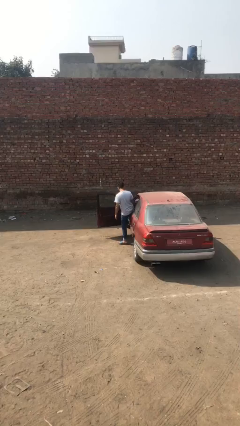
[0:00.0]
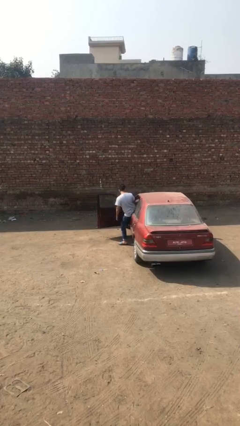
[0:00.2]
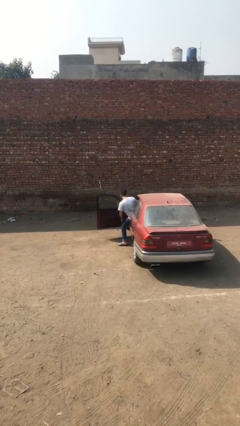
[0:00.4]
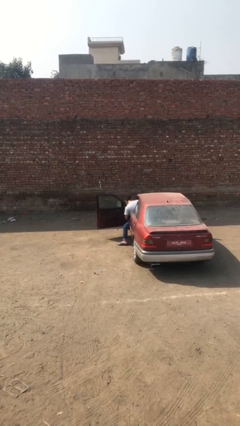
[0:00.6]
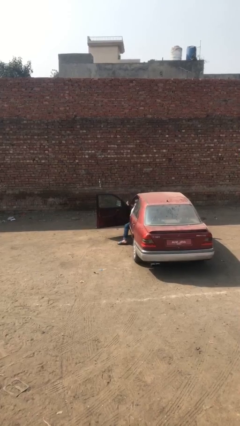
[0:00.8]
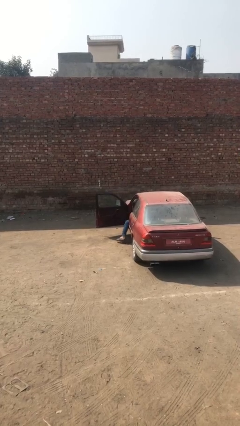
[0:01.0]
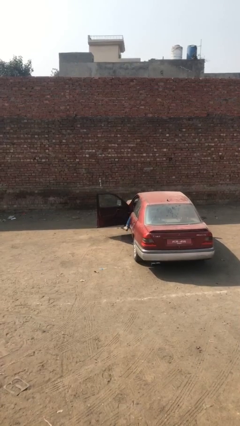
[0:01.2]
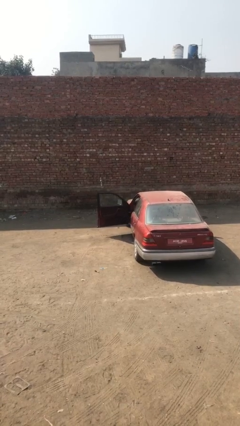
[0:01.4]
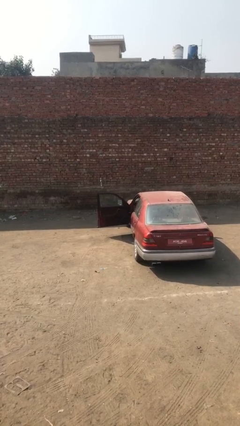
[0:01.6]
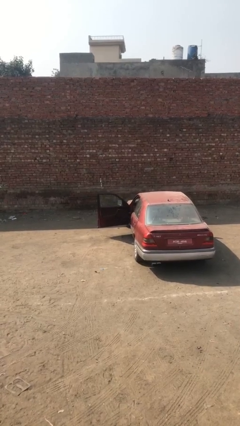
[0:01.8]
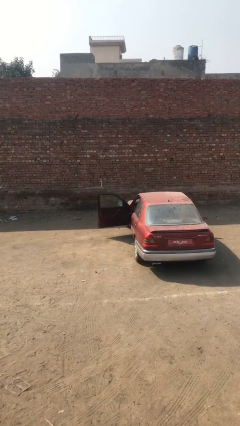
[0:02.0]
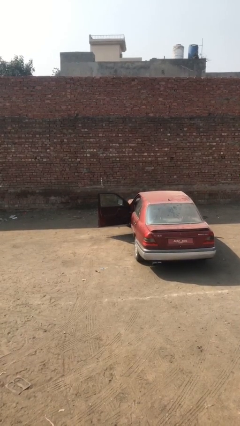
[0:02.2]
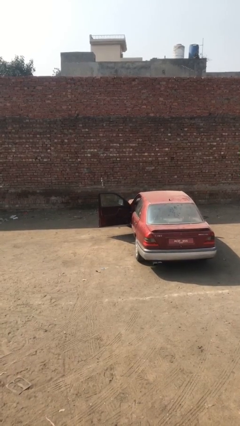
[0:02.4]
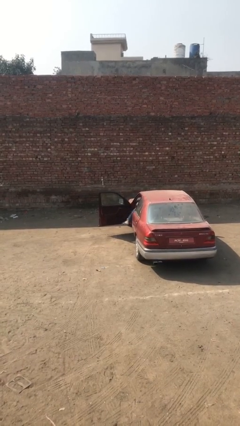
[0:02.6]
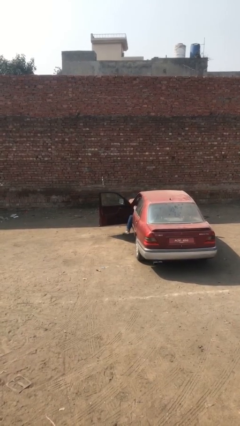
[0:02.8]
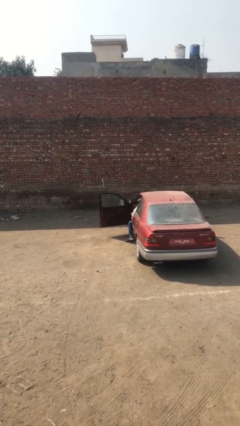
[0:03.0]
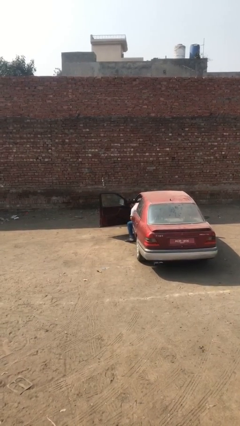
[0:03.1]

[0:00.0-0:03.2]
person enters car

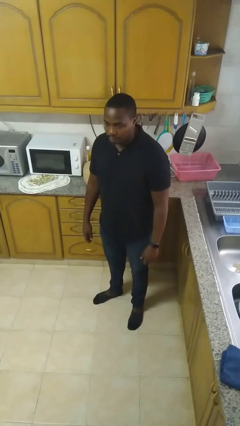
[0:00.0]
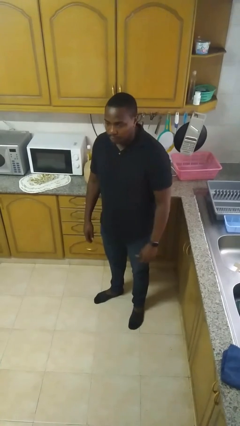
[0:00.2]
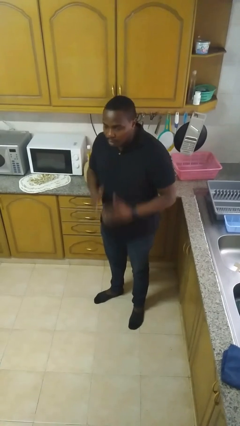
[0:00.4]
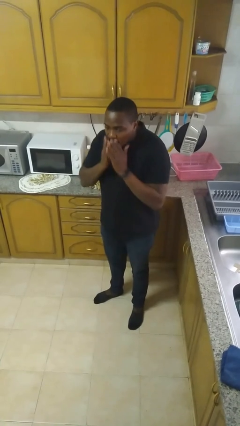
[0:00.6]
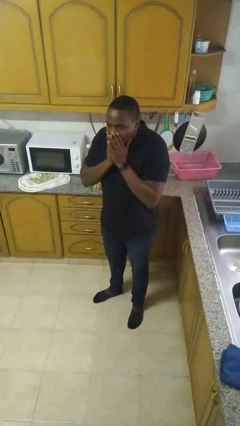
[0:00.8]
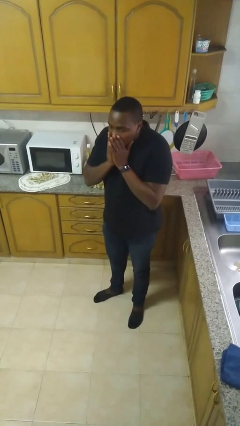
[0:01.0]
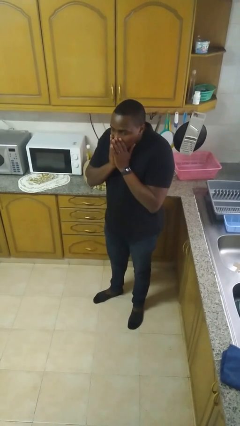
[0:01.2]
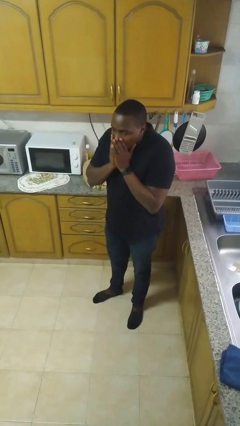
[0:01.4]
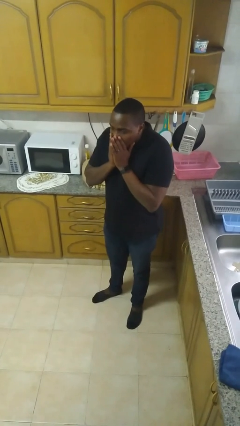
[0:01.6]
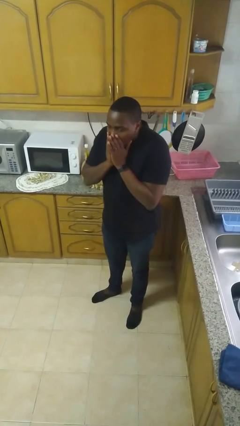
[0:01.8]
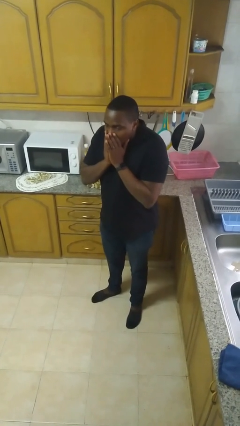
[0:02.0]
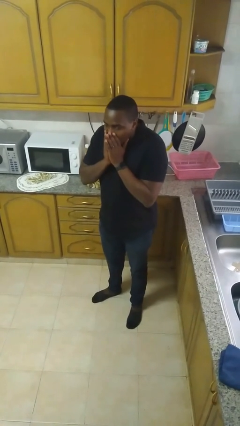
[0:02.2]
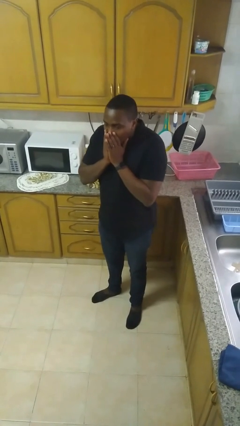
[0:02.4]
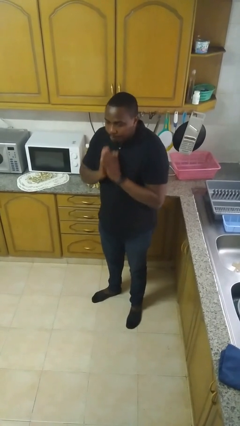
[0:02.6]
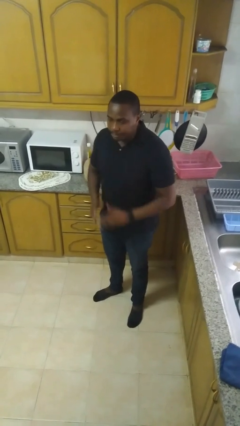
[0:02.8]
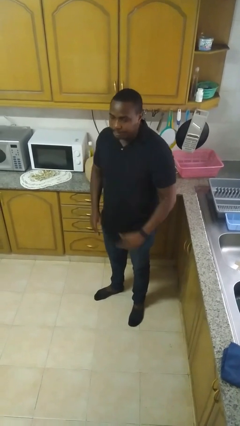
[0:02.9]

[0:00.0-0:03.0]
person yawns

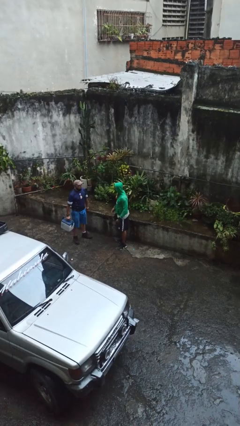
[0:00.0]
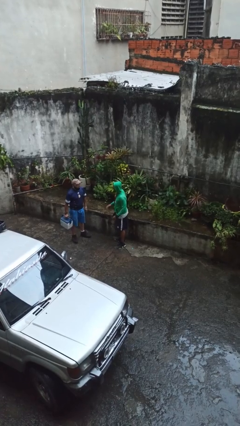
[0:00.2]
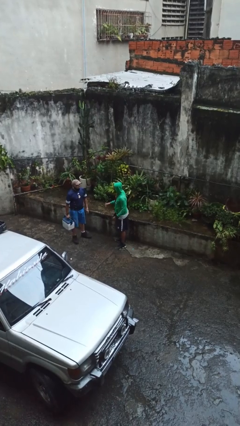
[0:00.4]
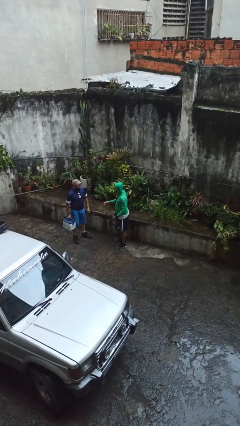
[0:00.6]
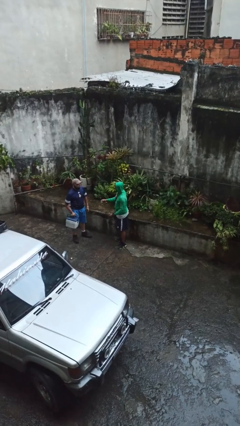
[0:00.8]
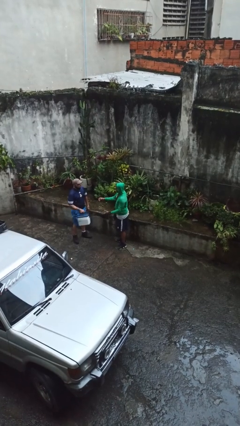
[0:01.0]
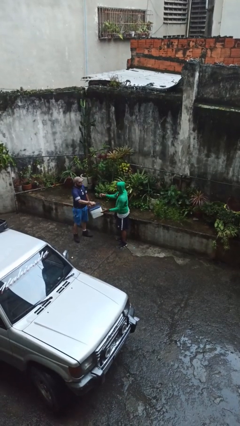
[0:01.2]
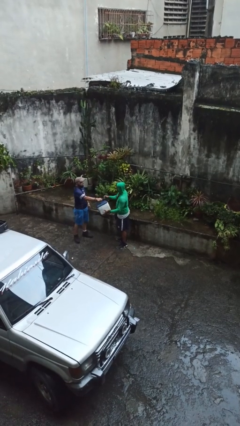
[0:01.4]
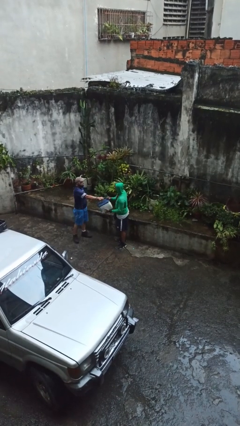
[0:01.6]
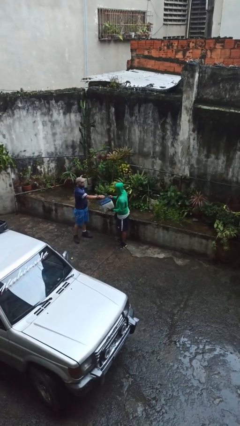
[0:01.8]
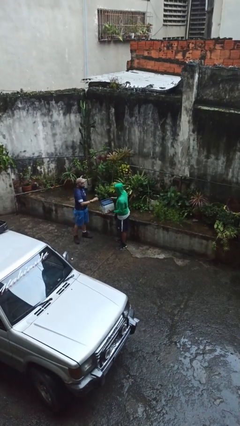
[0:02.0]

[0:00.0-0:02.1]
person transfers object to person

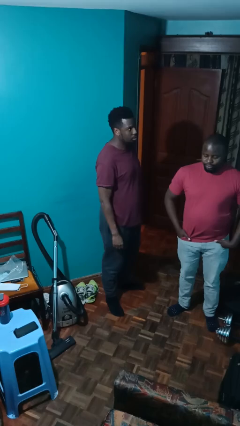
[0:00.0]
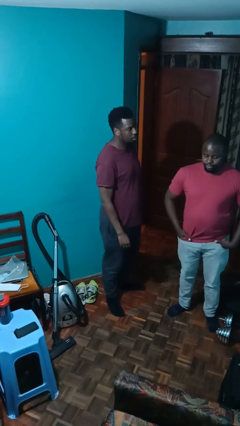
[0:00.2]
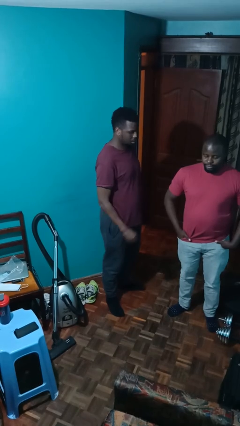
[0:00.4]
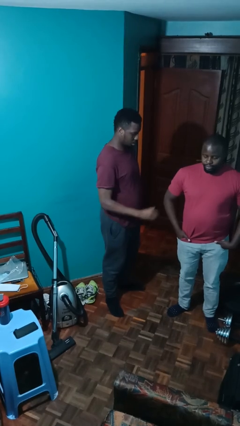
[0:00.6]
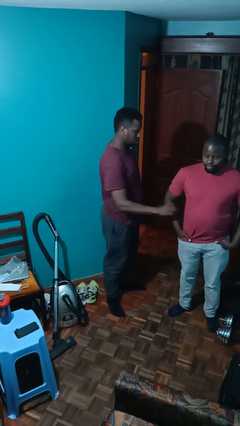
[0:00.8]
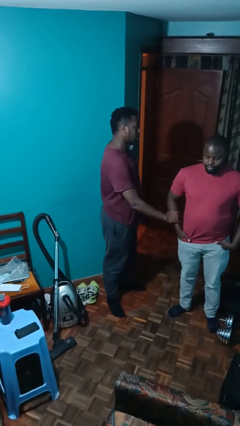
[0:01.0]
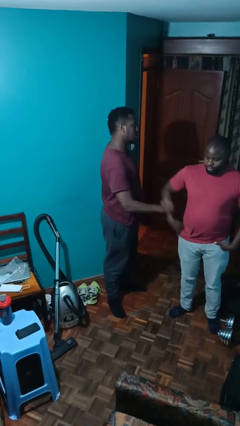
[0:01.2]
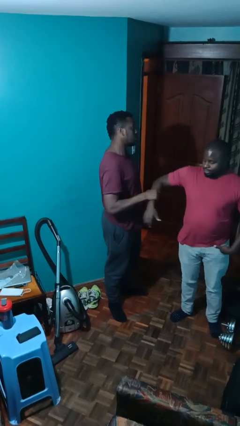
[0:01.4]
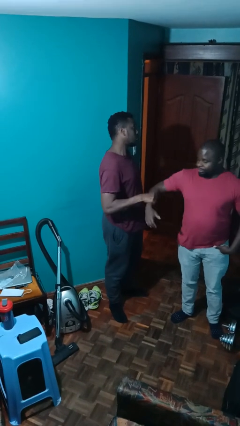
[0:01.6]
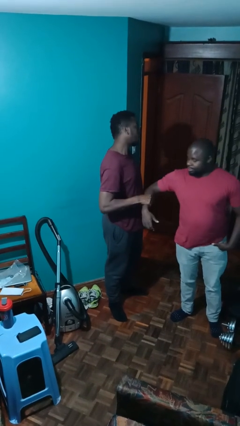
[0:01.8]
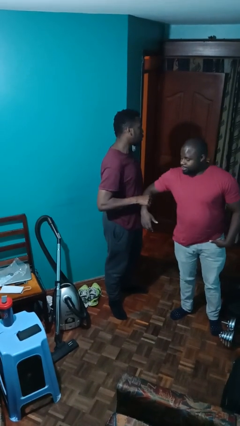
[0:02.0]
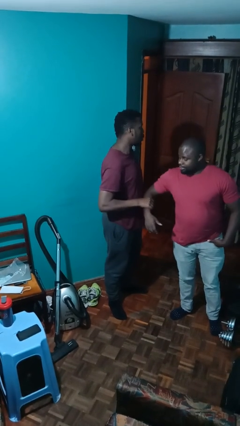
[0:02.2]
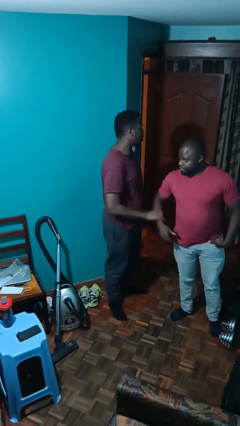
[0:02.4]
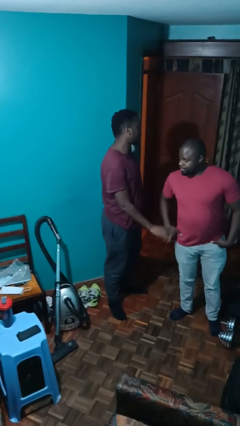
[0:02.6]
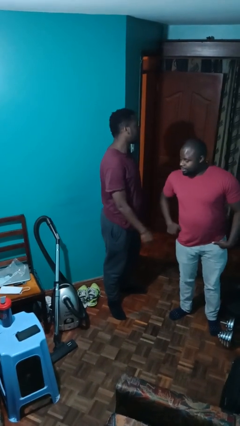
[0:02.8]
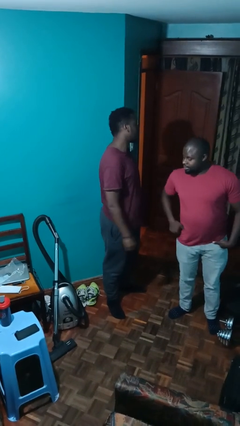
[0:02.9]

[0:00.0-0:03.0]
person grabs person by forearm

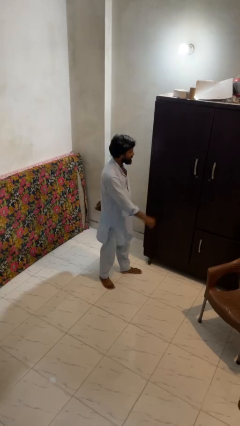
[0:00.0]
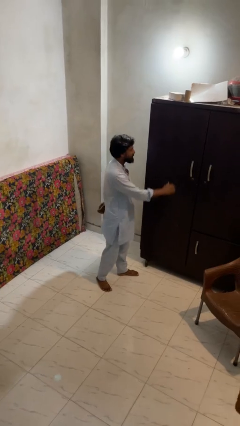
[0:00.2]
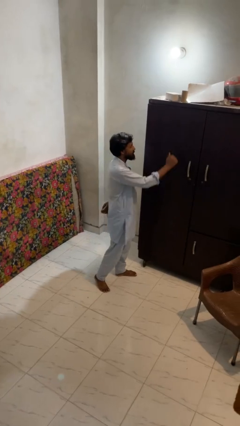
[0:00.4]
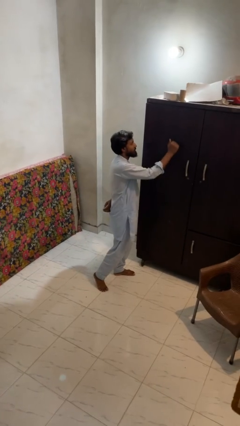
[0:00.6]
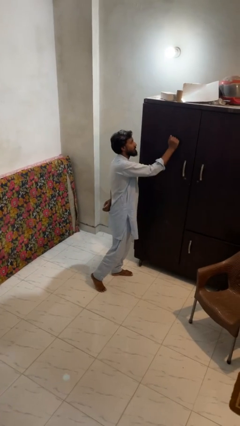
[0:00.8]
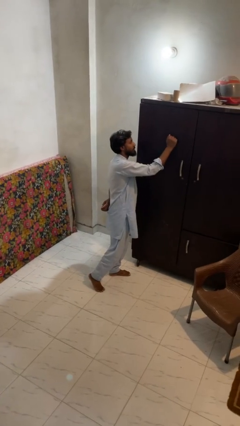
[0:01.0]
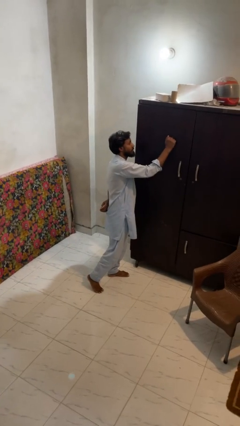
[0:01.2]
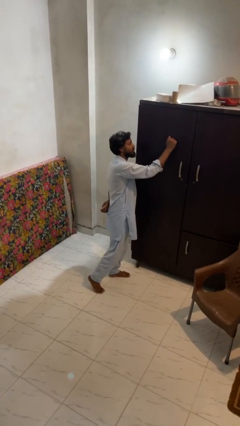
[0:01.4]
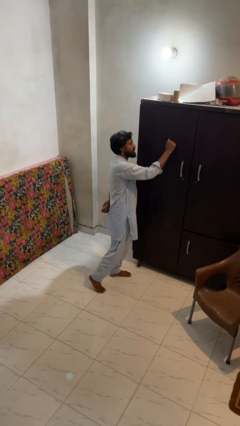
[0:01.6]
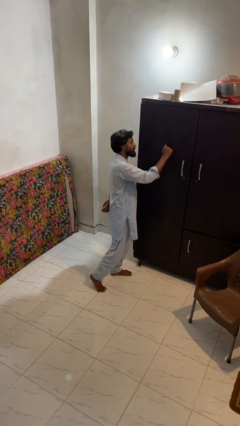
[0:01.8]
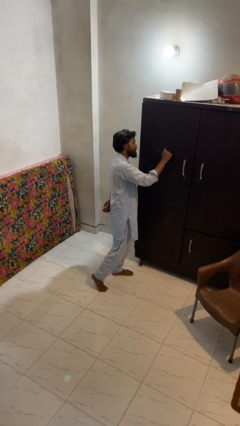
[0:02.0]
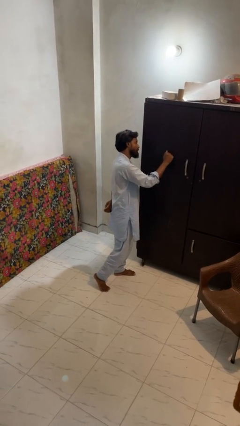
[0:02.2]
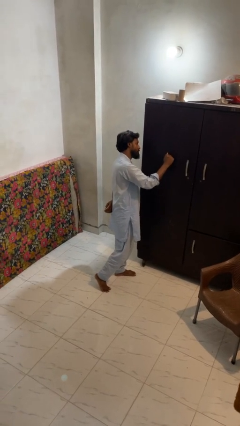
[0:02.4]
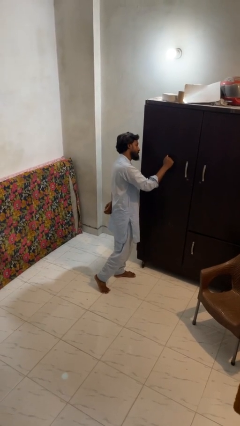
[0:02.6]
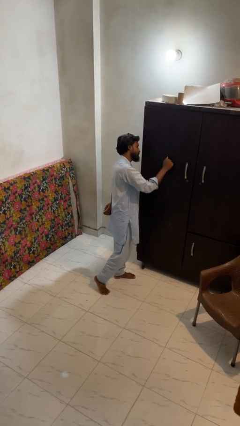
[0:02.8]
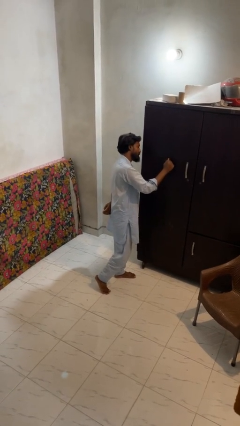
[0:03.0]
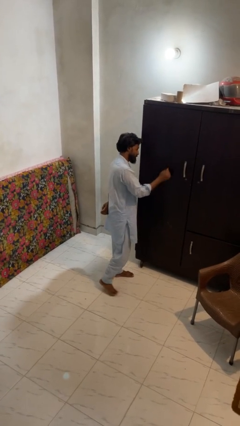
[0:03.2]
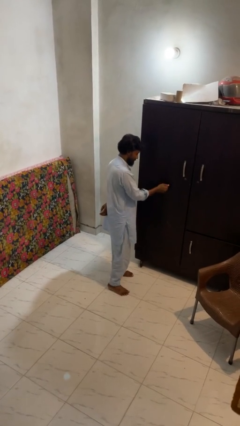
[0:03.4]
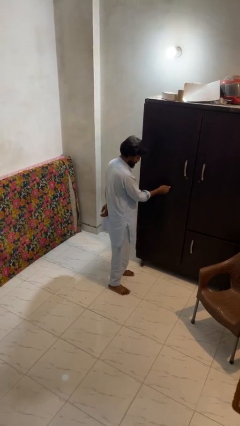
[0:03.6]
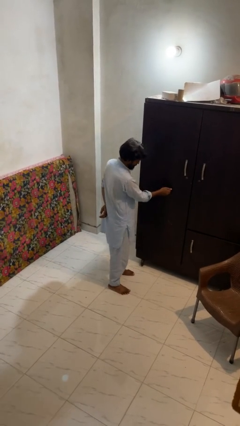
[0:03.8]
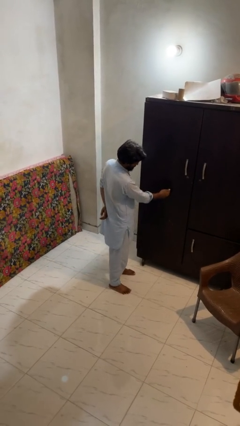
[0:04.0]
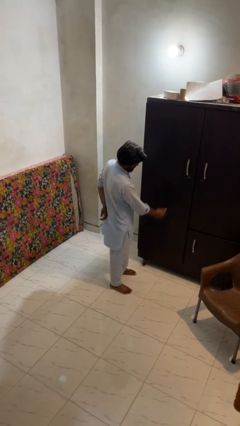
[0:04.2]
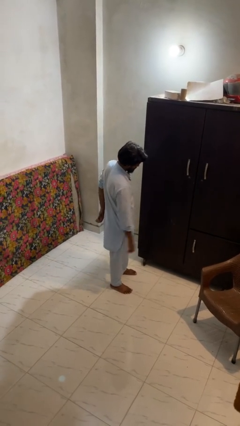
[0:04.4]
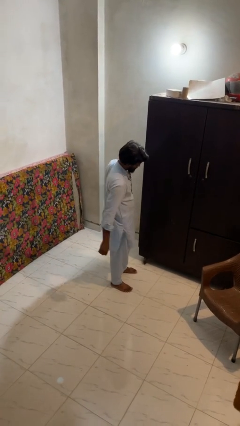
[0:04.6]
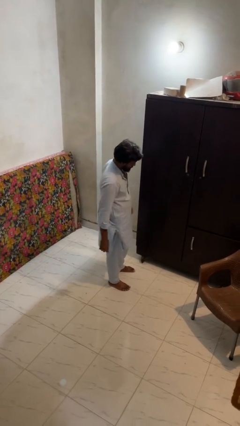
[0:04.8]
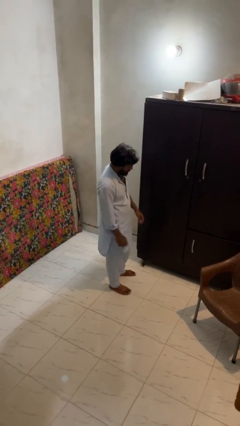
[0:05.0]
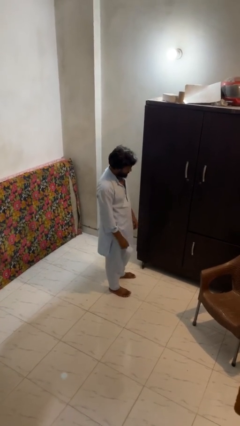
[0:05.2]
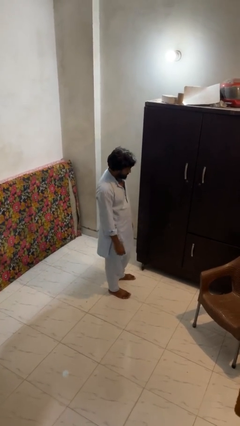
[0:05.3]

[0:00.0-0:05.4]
person taps object with finger

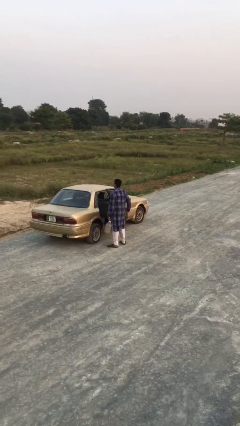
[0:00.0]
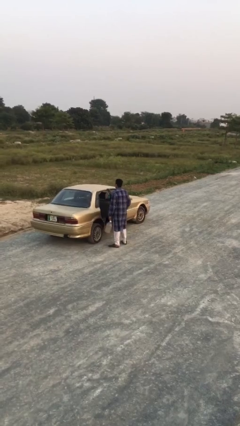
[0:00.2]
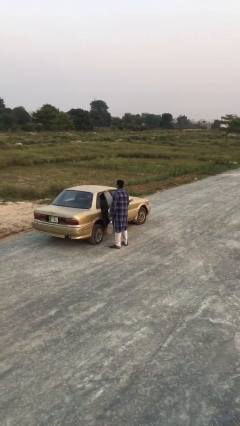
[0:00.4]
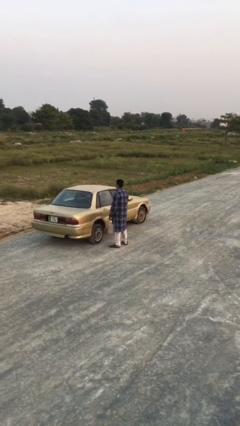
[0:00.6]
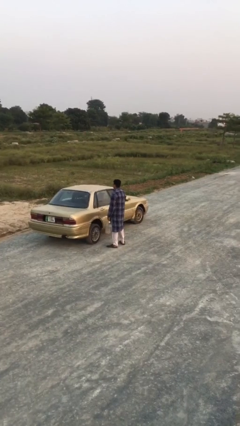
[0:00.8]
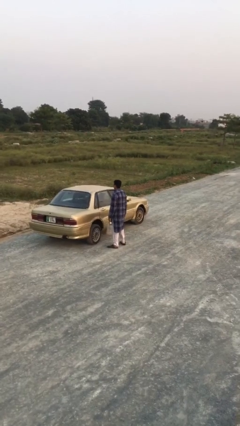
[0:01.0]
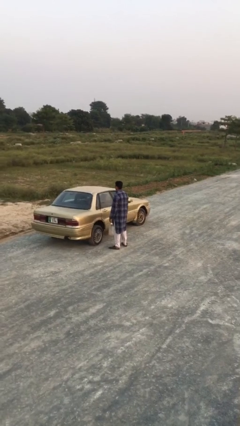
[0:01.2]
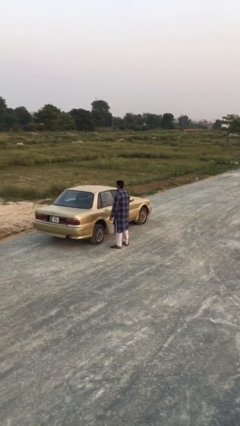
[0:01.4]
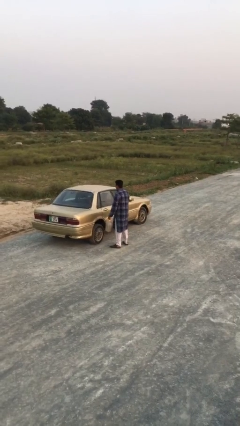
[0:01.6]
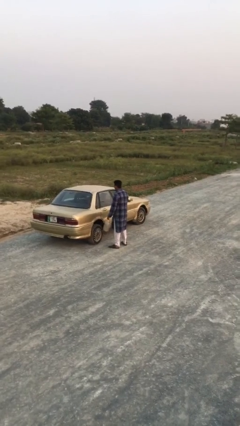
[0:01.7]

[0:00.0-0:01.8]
person closes car door
